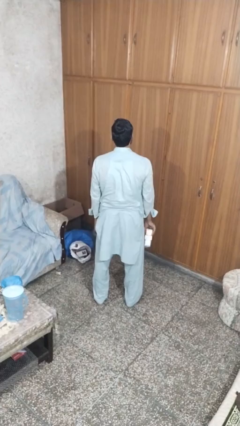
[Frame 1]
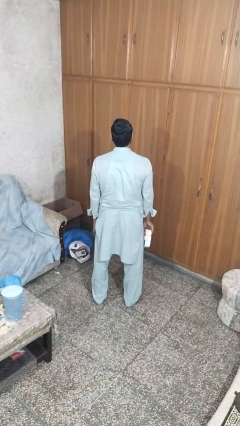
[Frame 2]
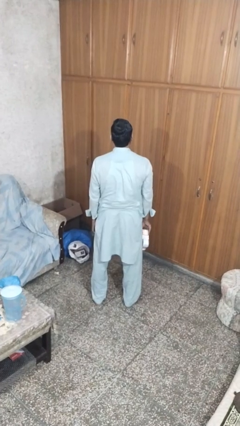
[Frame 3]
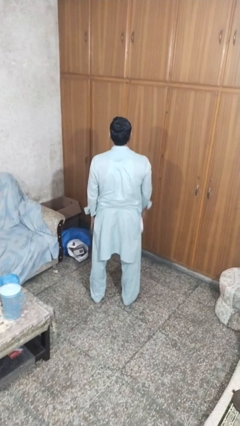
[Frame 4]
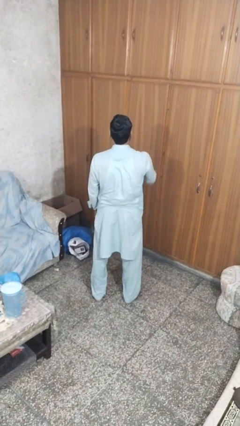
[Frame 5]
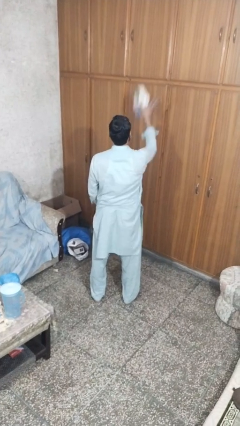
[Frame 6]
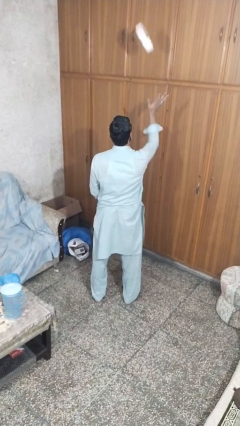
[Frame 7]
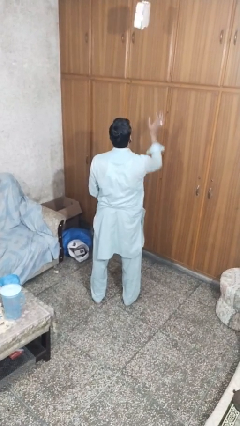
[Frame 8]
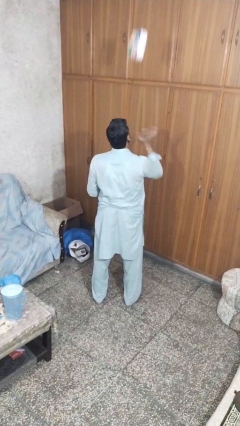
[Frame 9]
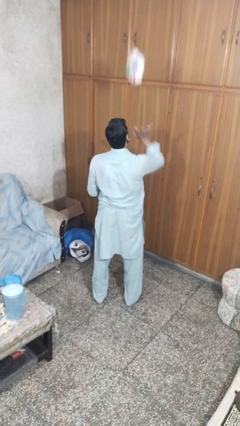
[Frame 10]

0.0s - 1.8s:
person drops object

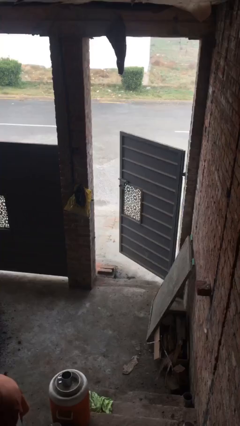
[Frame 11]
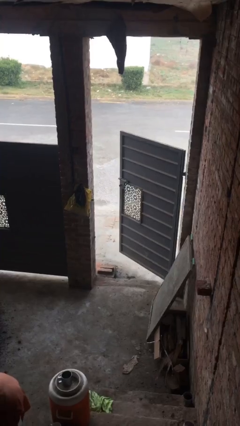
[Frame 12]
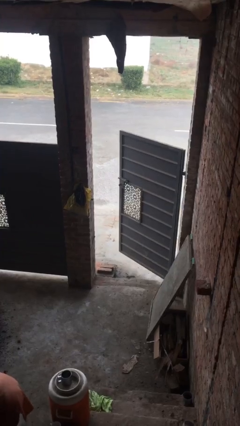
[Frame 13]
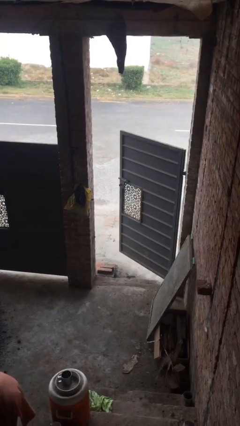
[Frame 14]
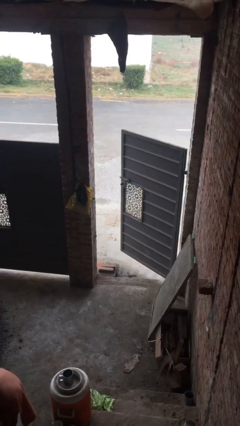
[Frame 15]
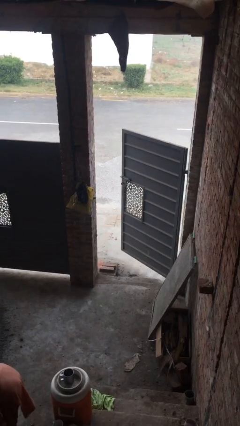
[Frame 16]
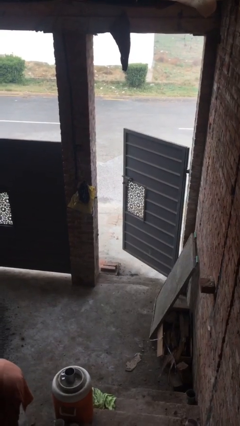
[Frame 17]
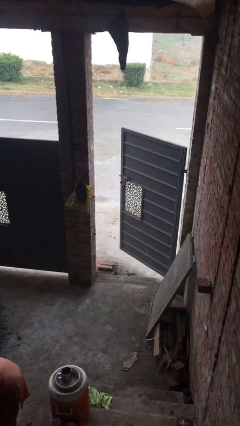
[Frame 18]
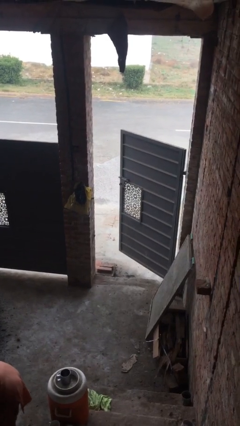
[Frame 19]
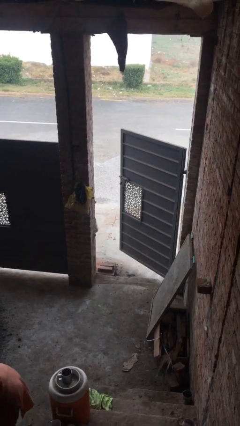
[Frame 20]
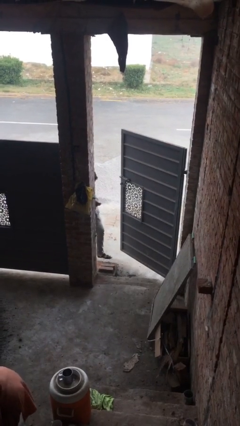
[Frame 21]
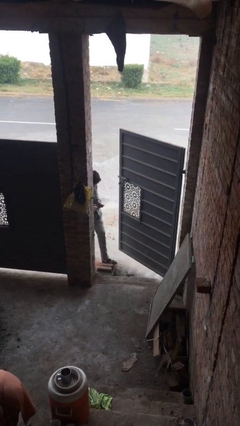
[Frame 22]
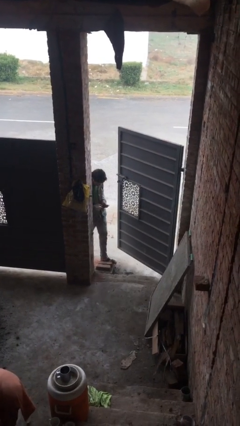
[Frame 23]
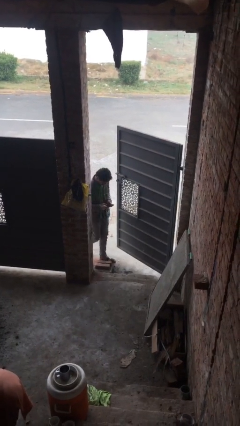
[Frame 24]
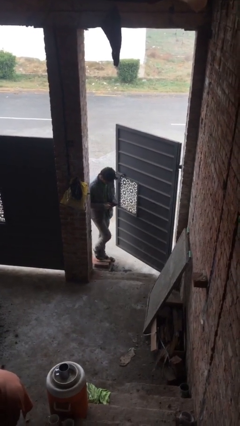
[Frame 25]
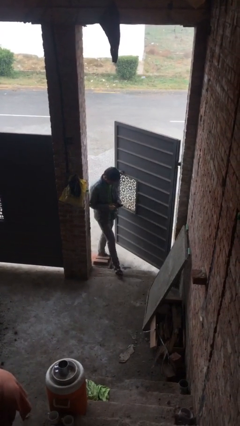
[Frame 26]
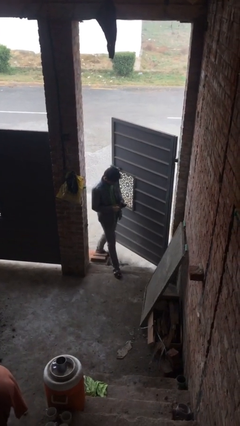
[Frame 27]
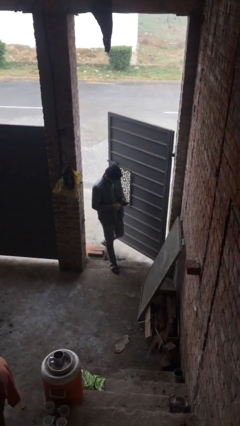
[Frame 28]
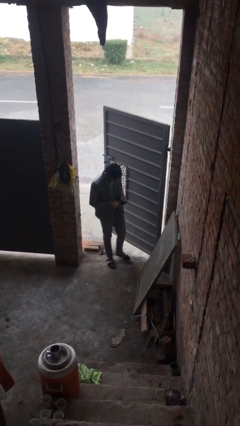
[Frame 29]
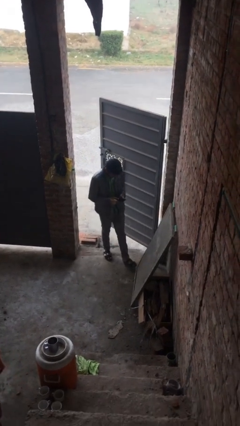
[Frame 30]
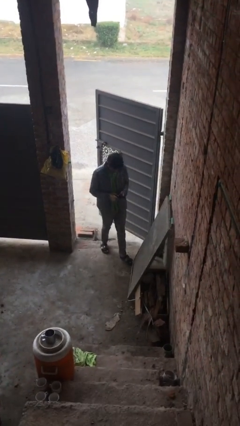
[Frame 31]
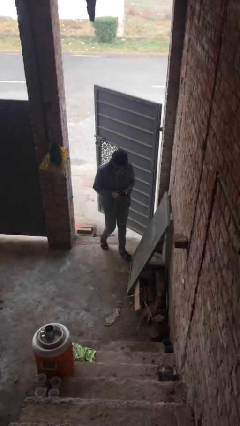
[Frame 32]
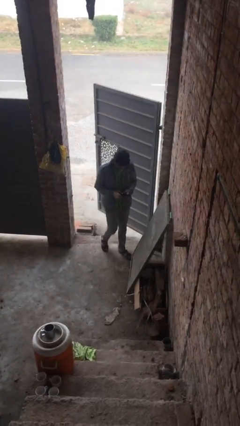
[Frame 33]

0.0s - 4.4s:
person enters scene through structure

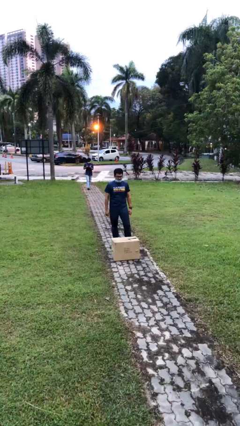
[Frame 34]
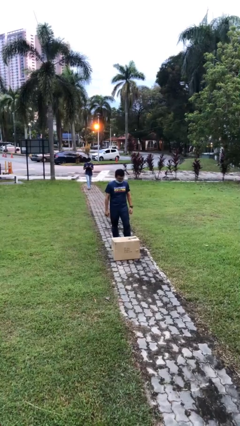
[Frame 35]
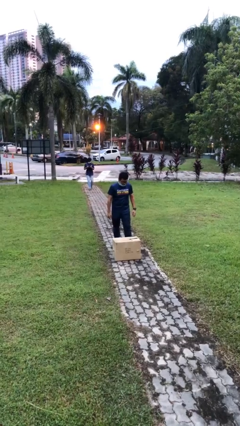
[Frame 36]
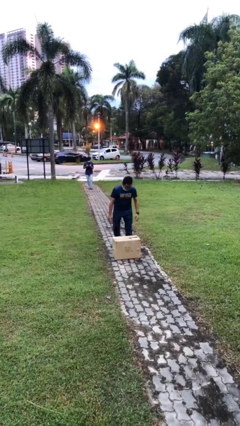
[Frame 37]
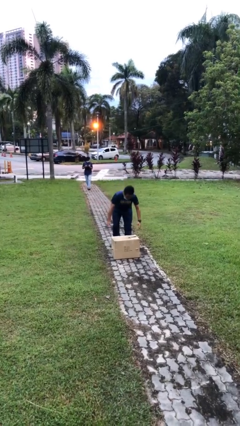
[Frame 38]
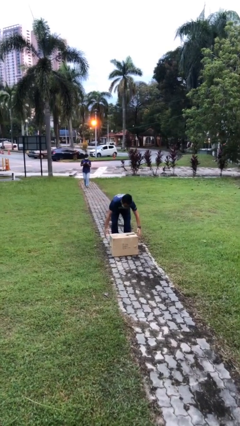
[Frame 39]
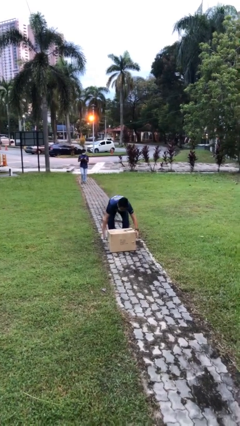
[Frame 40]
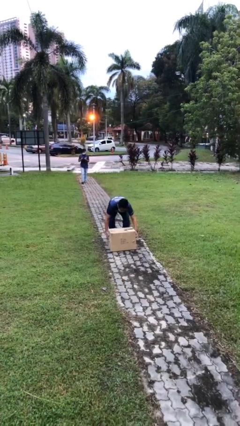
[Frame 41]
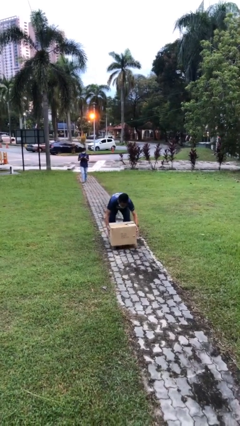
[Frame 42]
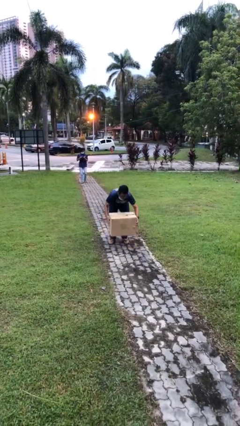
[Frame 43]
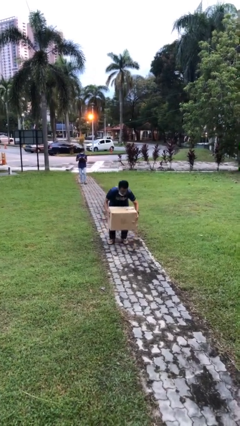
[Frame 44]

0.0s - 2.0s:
person picks up object from floor

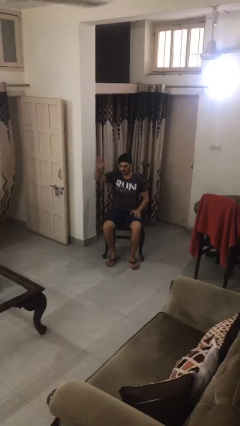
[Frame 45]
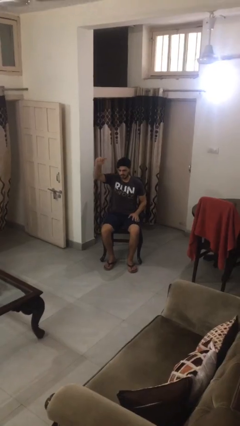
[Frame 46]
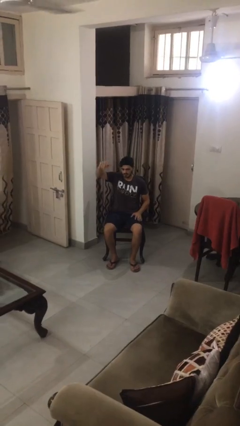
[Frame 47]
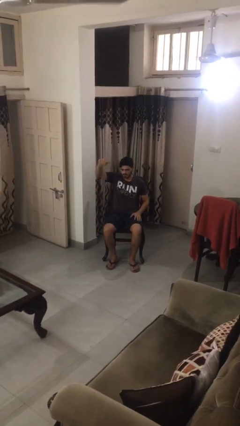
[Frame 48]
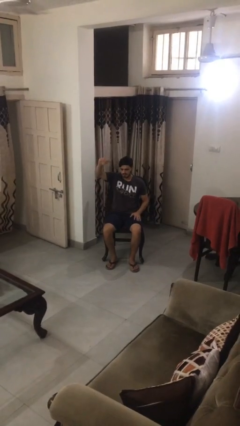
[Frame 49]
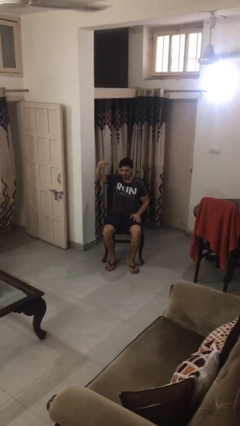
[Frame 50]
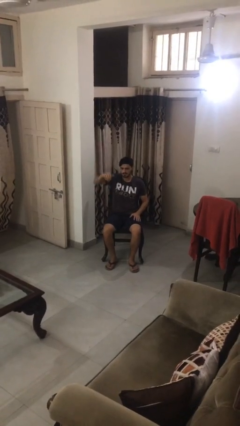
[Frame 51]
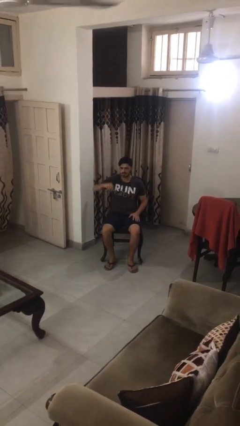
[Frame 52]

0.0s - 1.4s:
person gestures come here

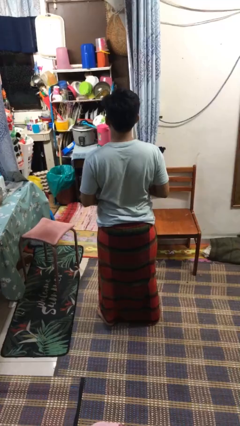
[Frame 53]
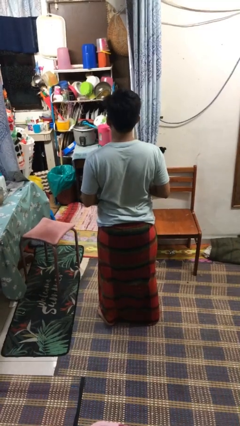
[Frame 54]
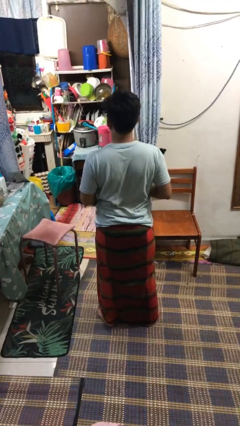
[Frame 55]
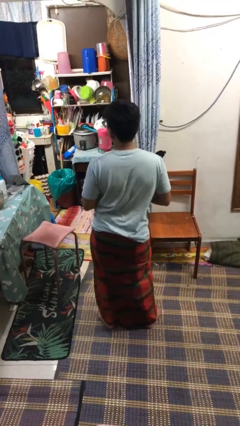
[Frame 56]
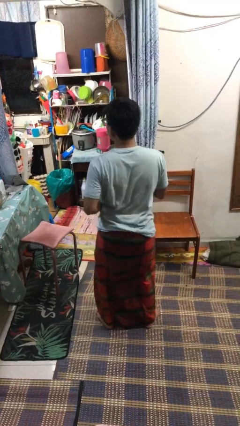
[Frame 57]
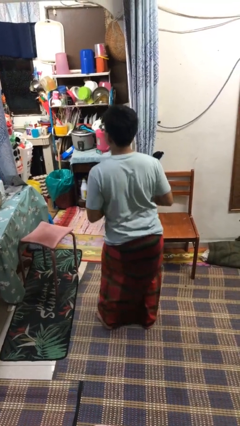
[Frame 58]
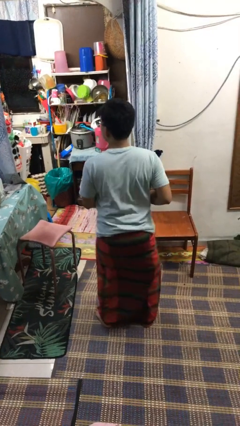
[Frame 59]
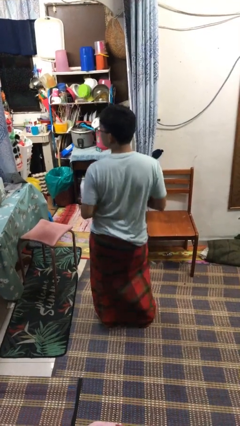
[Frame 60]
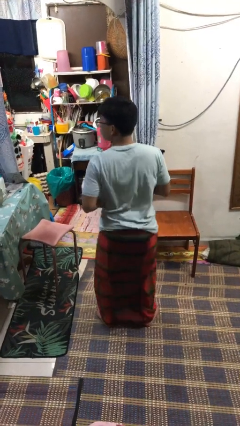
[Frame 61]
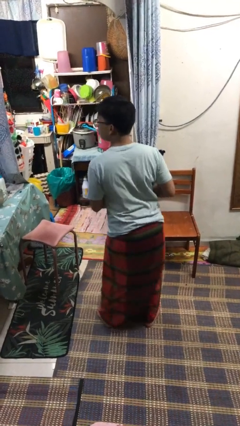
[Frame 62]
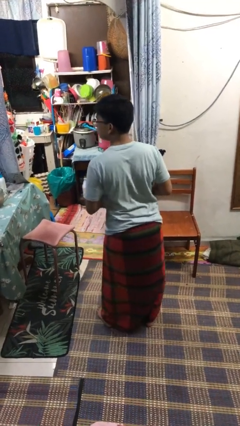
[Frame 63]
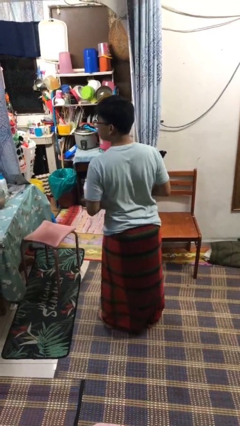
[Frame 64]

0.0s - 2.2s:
person wiggles hips

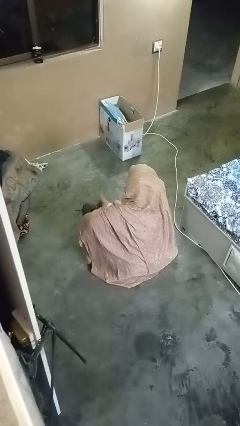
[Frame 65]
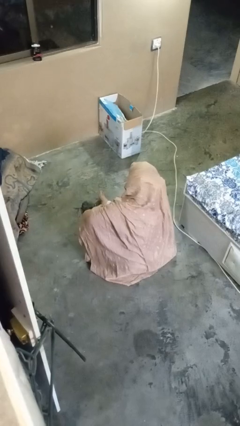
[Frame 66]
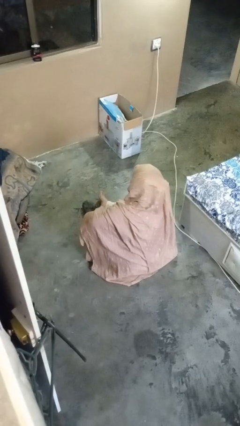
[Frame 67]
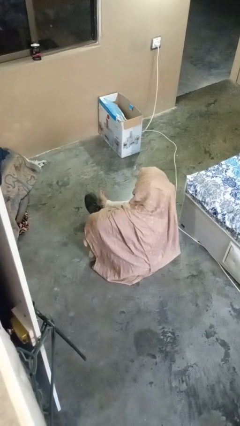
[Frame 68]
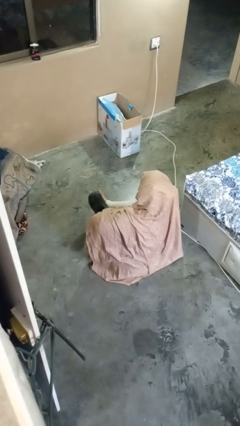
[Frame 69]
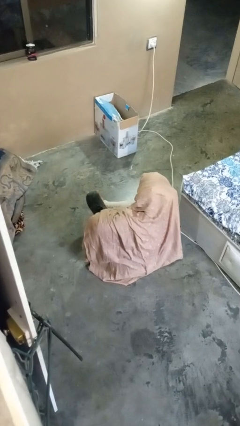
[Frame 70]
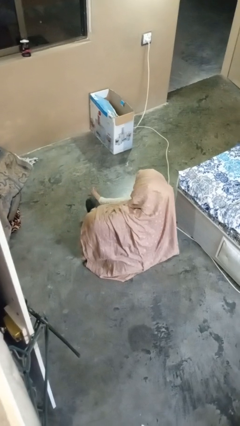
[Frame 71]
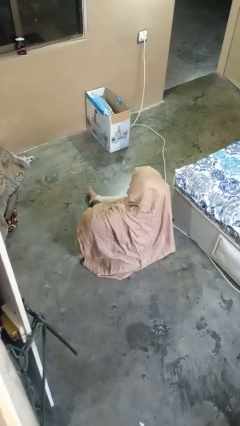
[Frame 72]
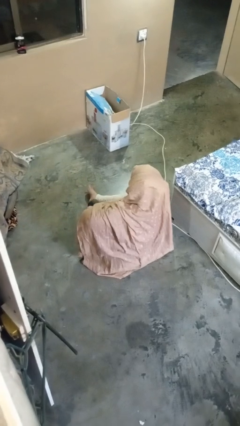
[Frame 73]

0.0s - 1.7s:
person puts on shoes

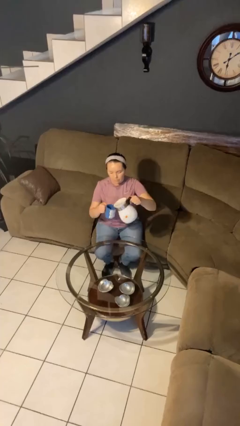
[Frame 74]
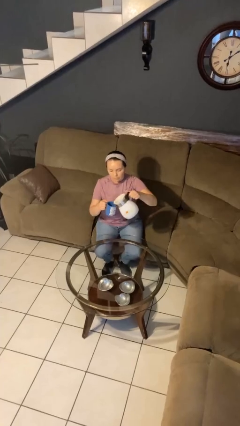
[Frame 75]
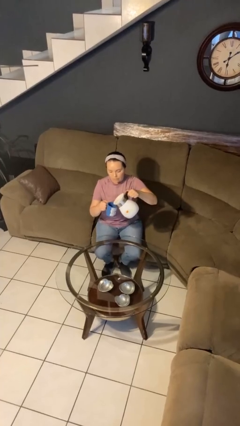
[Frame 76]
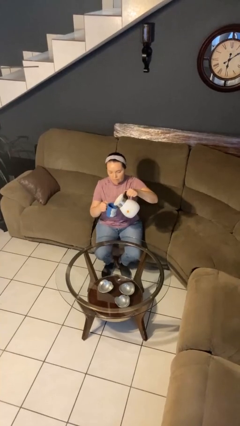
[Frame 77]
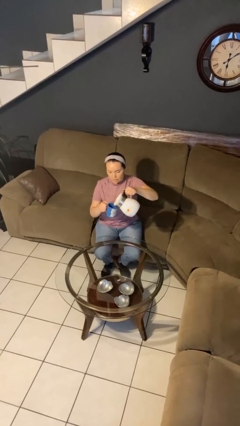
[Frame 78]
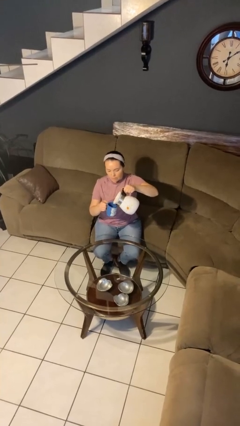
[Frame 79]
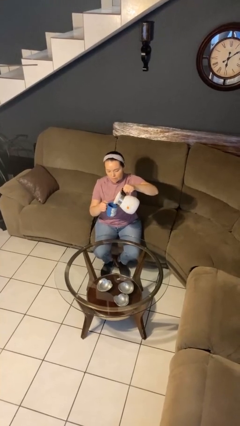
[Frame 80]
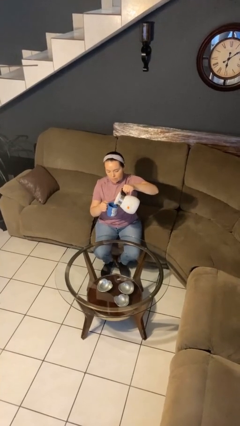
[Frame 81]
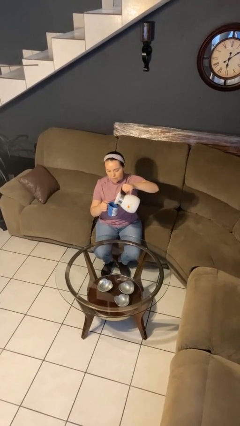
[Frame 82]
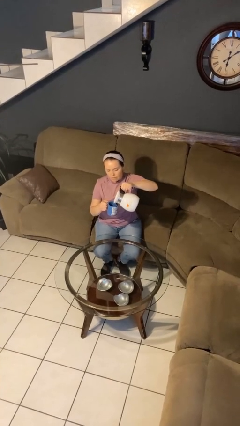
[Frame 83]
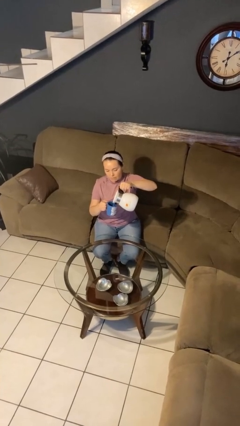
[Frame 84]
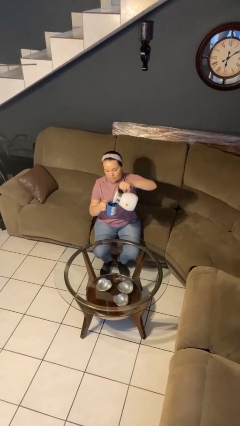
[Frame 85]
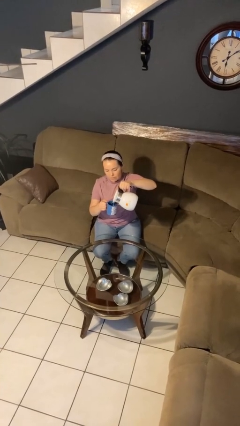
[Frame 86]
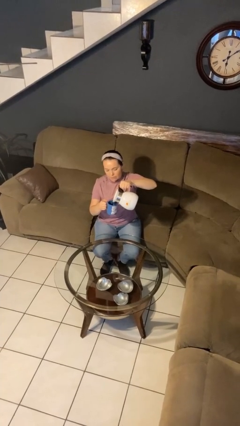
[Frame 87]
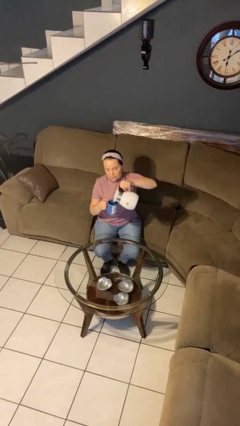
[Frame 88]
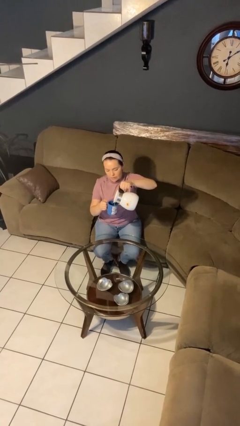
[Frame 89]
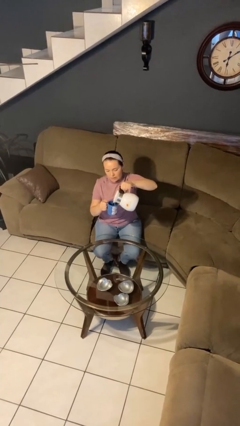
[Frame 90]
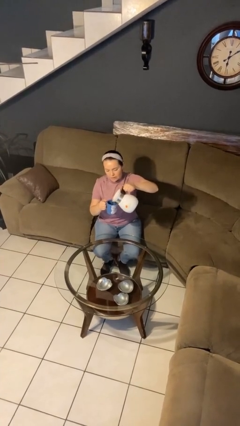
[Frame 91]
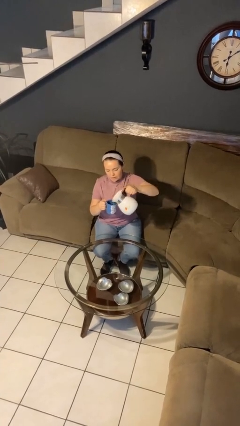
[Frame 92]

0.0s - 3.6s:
person pours coffee into mug
